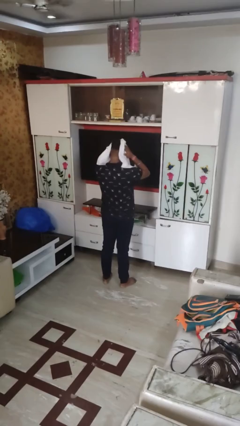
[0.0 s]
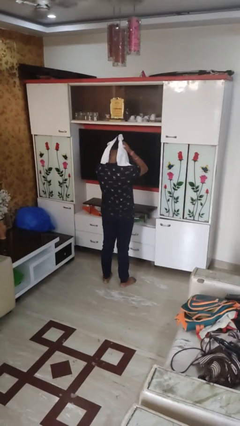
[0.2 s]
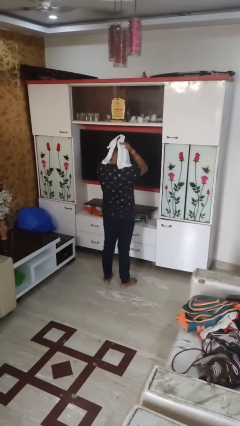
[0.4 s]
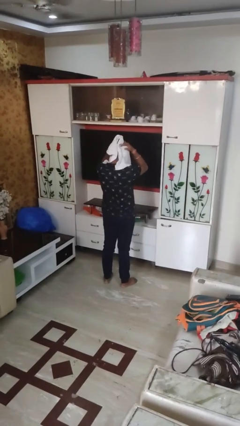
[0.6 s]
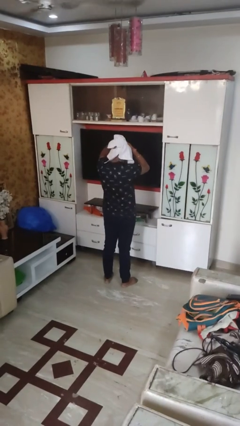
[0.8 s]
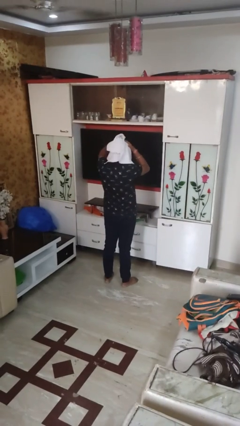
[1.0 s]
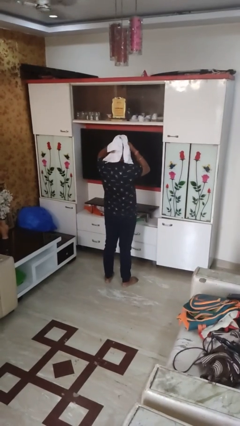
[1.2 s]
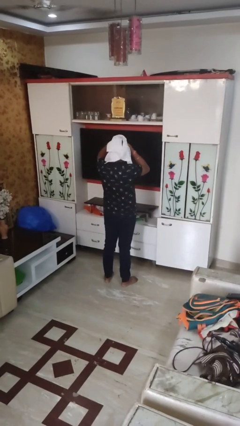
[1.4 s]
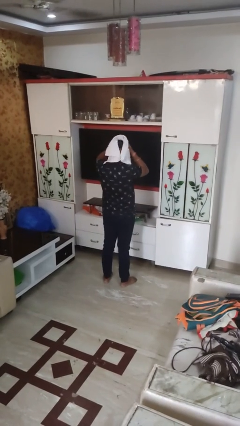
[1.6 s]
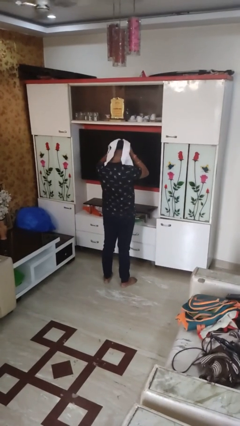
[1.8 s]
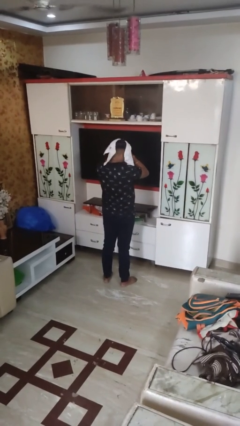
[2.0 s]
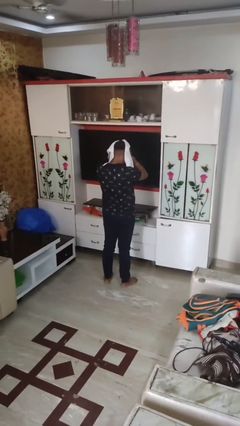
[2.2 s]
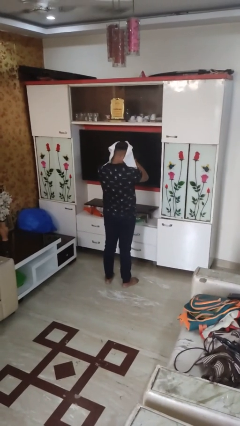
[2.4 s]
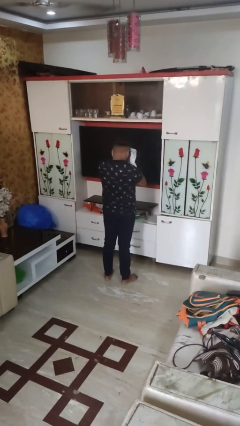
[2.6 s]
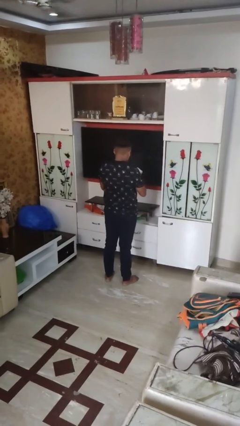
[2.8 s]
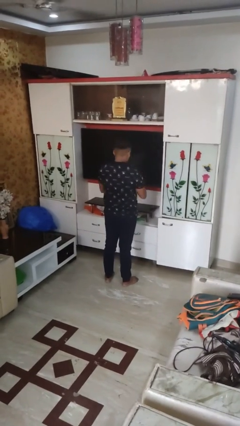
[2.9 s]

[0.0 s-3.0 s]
person dries hair with towel

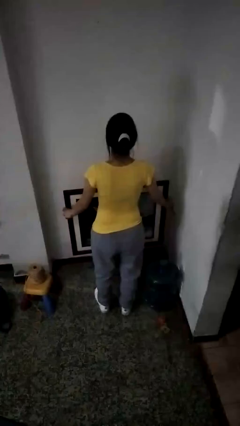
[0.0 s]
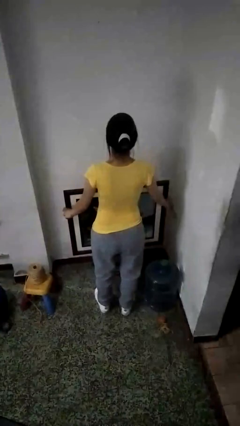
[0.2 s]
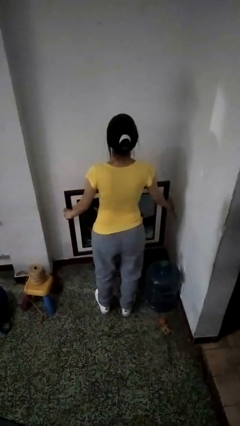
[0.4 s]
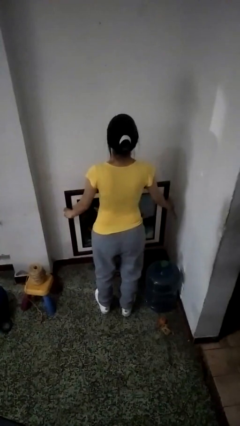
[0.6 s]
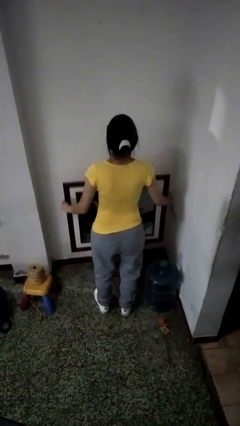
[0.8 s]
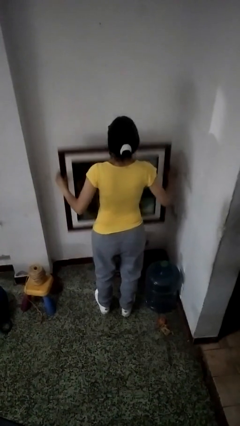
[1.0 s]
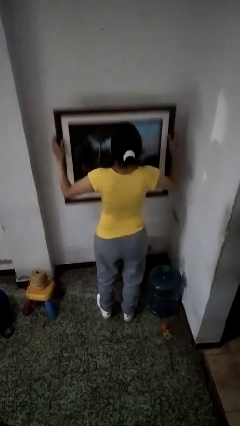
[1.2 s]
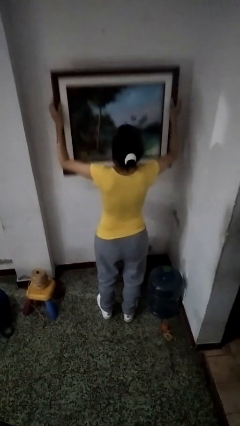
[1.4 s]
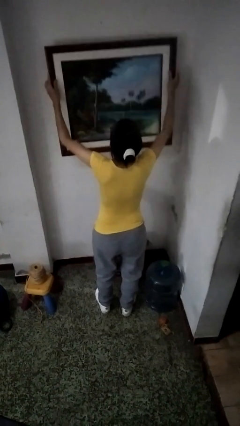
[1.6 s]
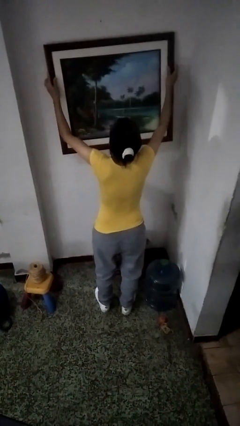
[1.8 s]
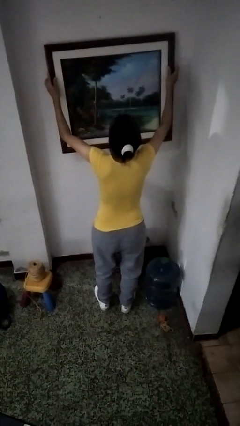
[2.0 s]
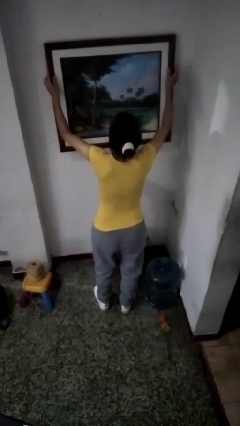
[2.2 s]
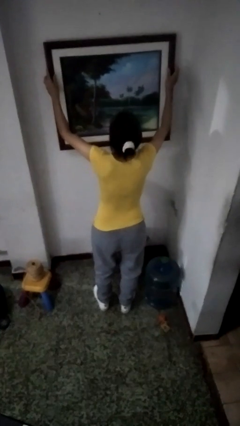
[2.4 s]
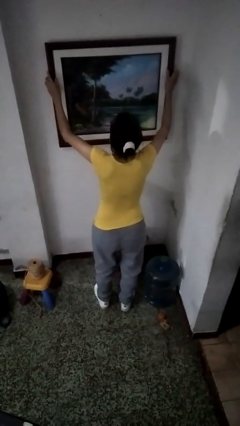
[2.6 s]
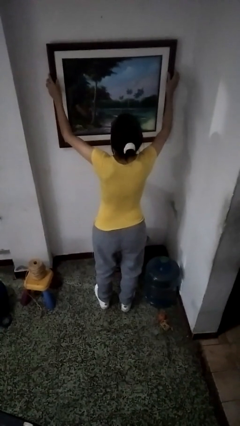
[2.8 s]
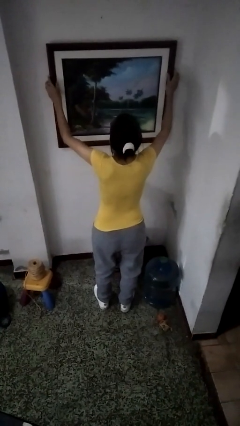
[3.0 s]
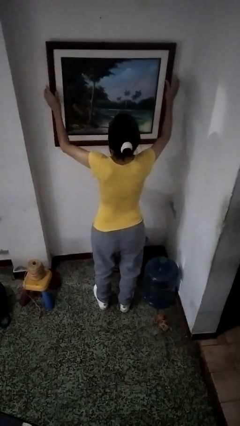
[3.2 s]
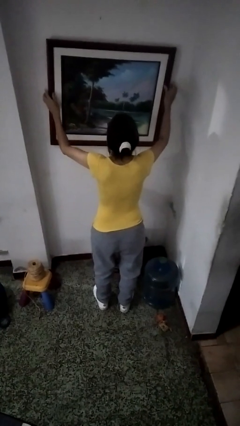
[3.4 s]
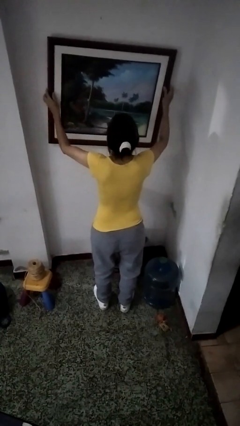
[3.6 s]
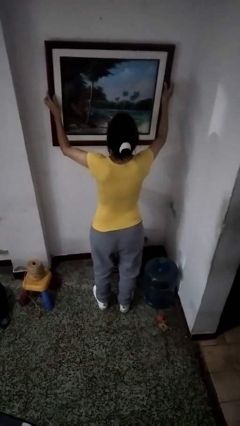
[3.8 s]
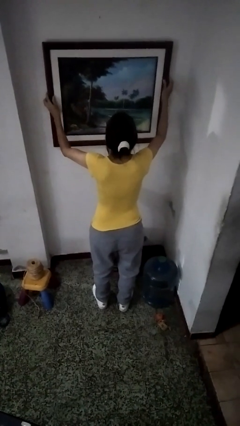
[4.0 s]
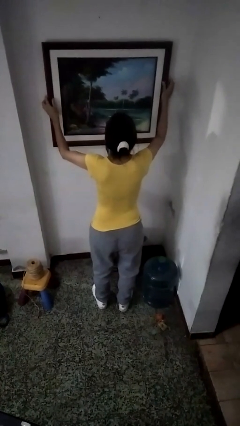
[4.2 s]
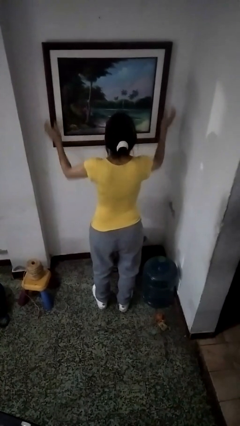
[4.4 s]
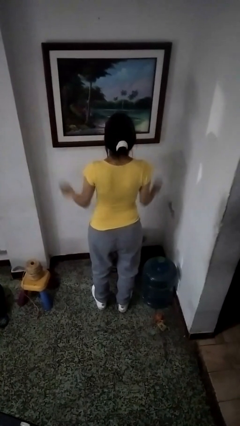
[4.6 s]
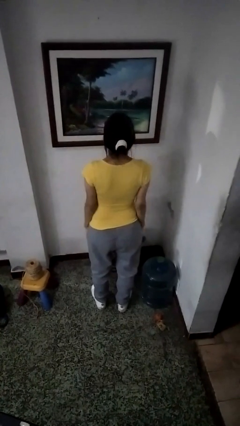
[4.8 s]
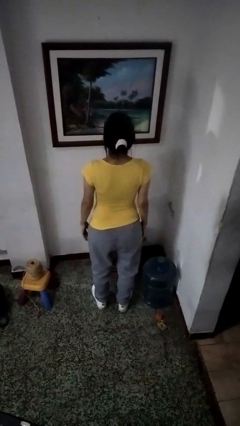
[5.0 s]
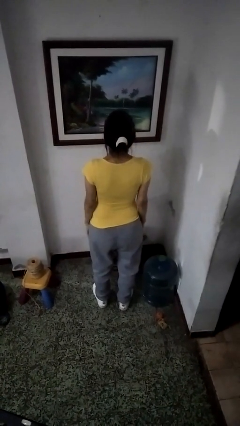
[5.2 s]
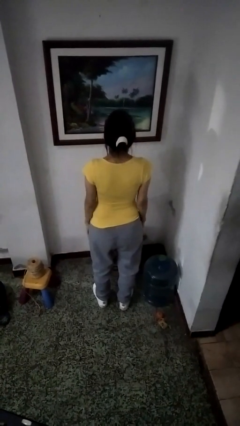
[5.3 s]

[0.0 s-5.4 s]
person puts up picture frame

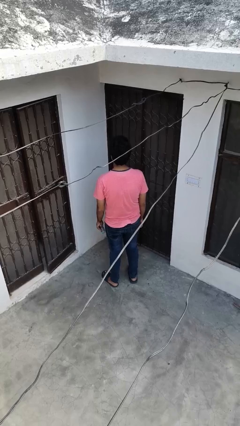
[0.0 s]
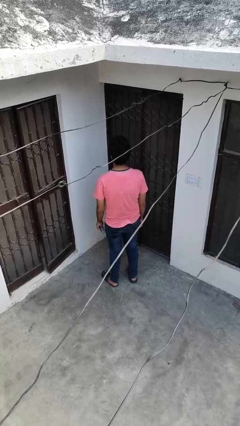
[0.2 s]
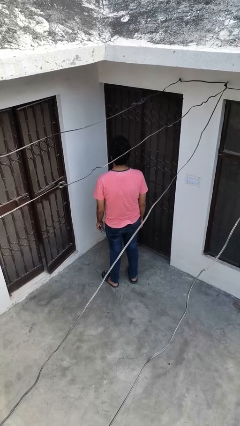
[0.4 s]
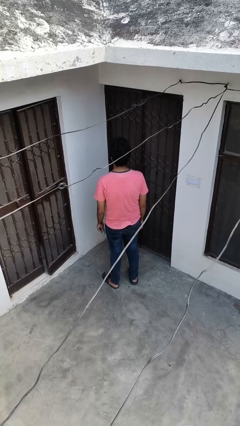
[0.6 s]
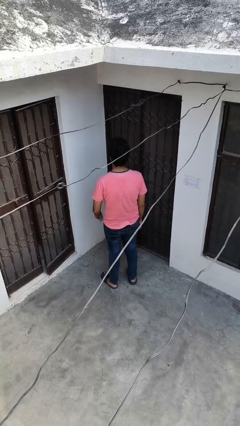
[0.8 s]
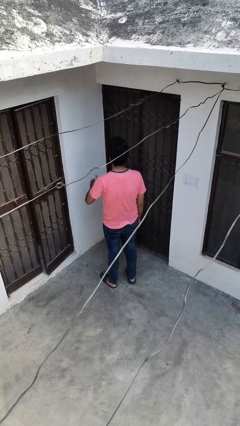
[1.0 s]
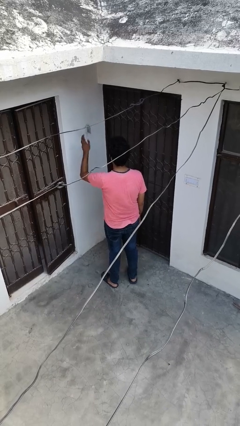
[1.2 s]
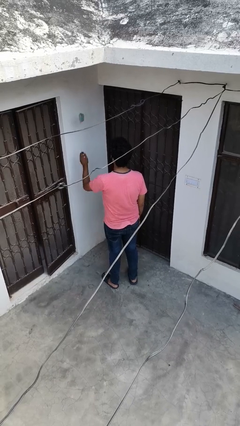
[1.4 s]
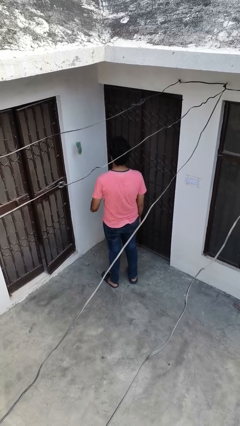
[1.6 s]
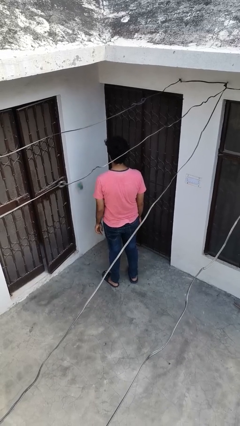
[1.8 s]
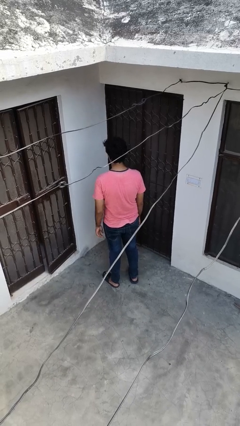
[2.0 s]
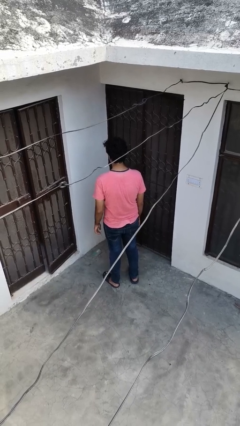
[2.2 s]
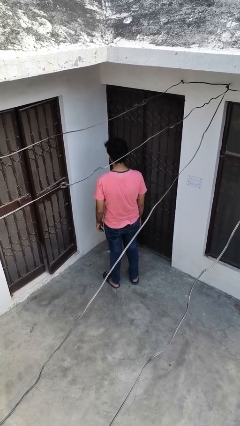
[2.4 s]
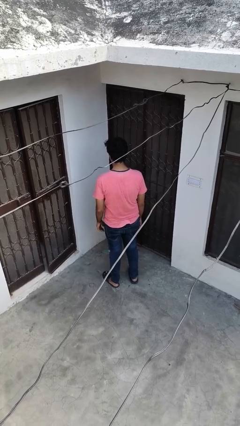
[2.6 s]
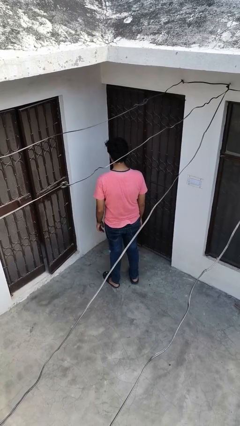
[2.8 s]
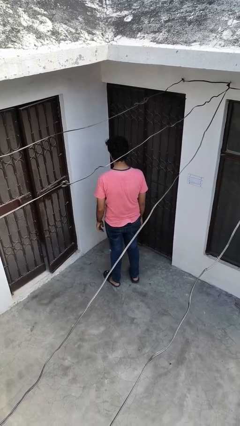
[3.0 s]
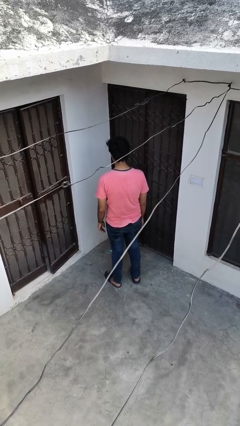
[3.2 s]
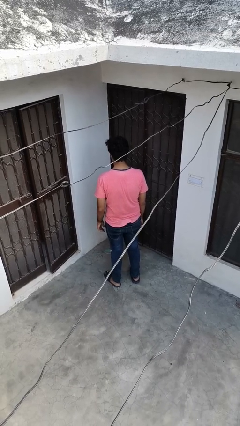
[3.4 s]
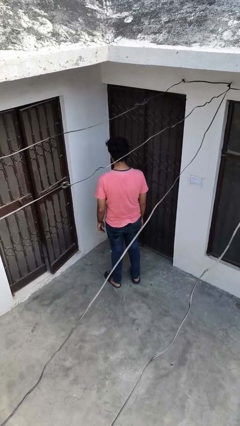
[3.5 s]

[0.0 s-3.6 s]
person throws object into air

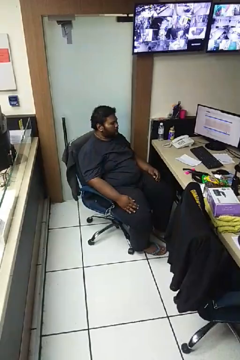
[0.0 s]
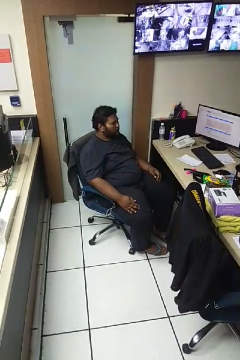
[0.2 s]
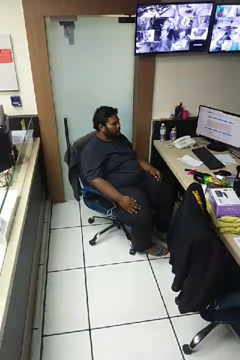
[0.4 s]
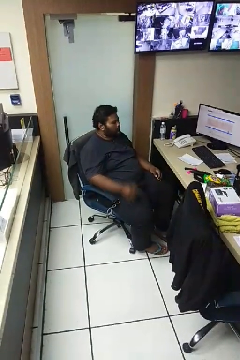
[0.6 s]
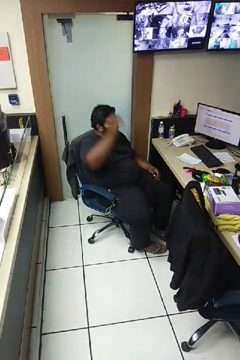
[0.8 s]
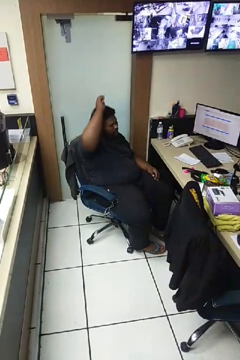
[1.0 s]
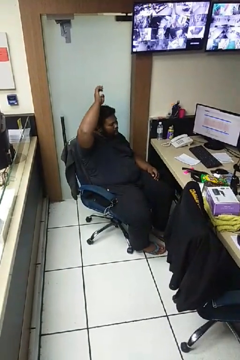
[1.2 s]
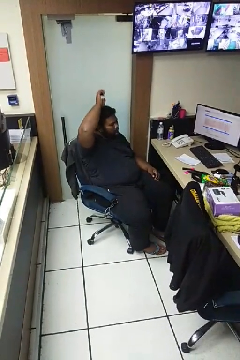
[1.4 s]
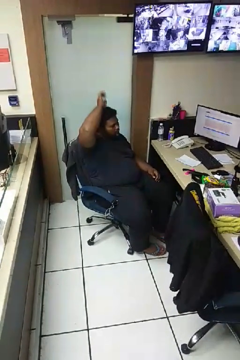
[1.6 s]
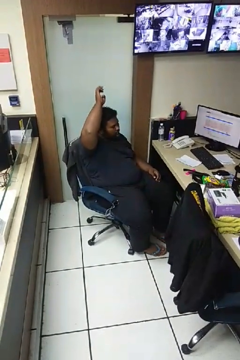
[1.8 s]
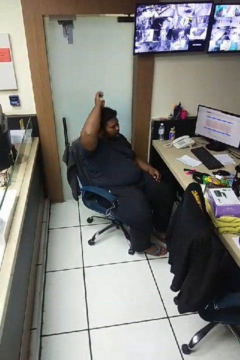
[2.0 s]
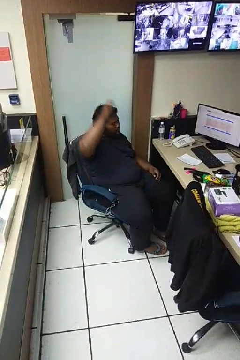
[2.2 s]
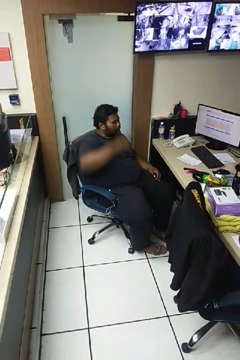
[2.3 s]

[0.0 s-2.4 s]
person pats head

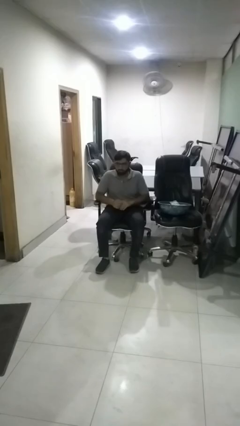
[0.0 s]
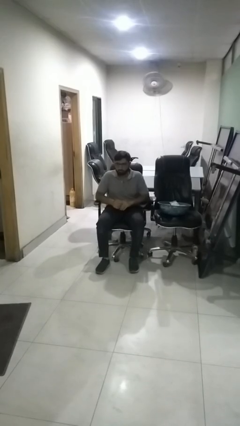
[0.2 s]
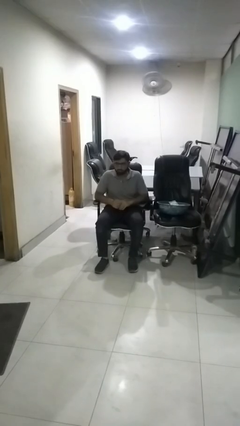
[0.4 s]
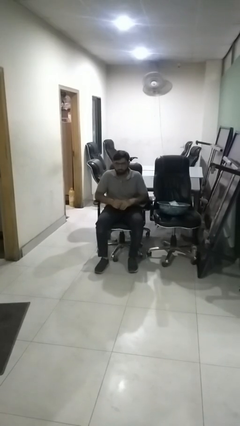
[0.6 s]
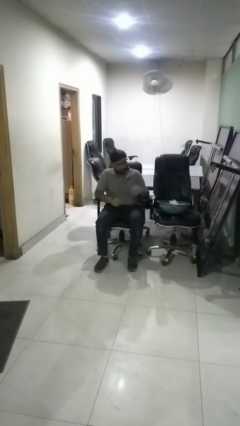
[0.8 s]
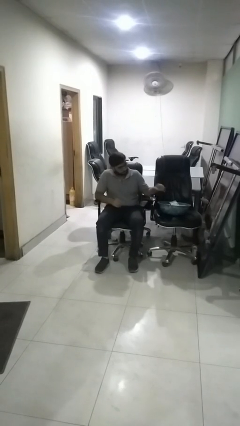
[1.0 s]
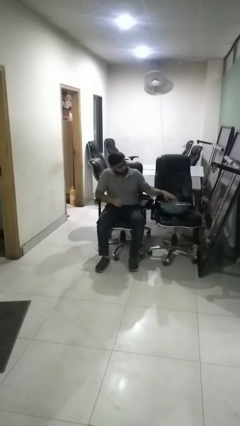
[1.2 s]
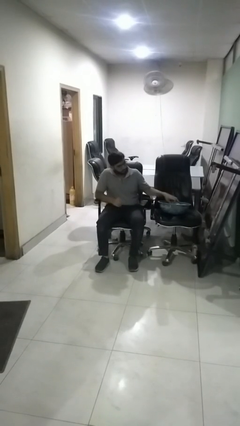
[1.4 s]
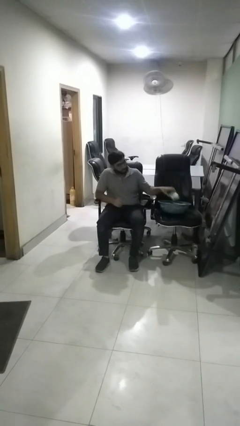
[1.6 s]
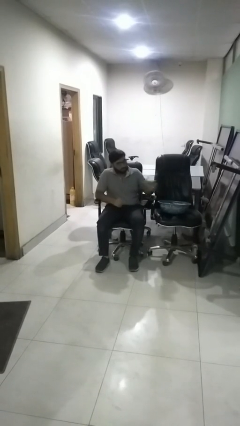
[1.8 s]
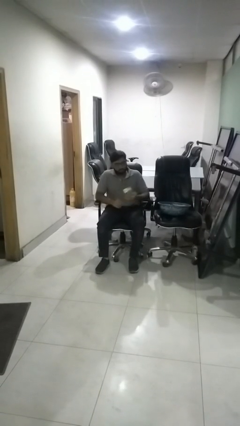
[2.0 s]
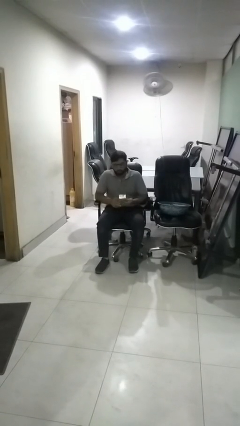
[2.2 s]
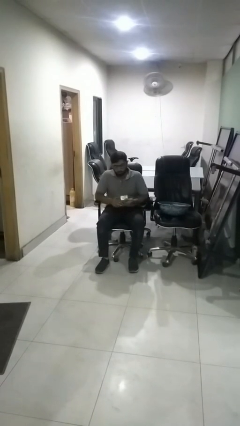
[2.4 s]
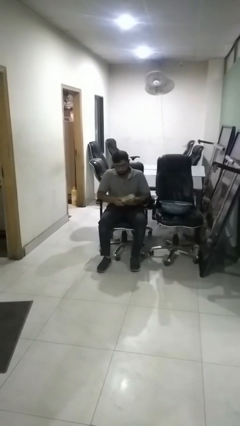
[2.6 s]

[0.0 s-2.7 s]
person takes object from basket

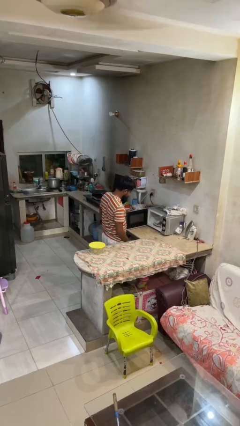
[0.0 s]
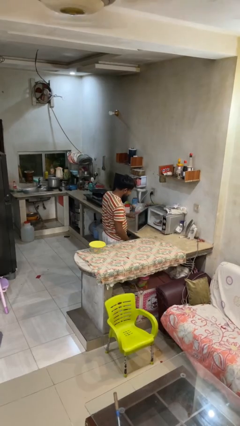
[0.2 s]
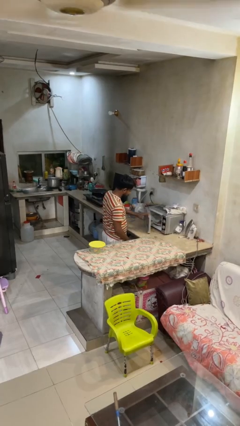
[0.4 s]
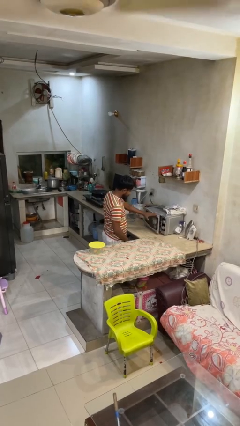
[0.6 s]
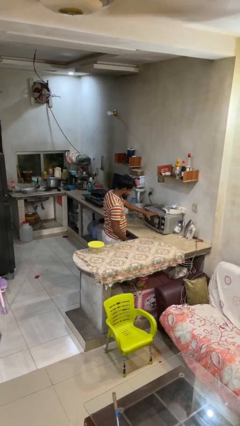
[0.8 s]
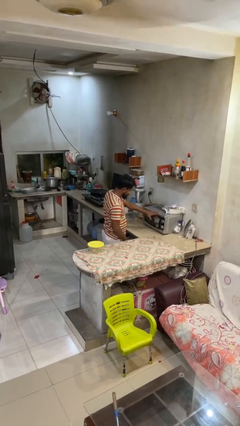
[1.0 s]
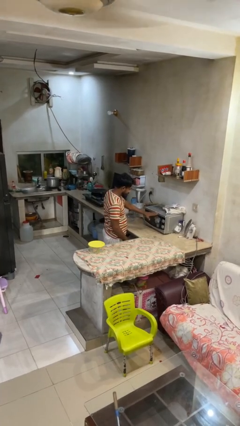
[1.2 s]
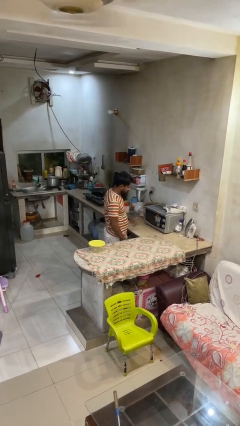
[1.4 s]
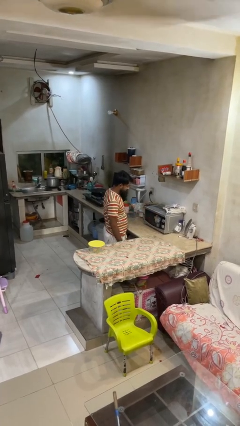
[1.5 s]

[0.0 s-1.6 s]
person closes microwave
